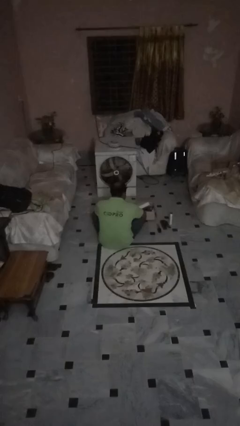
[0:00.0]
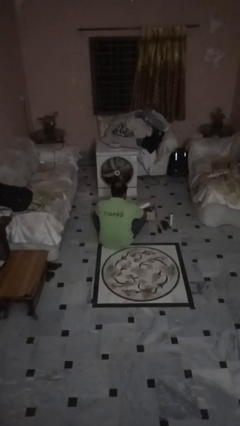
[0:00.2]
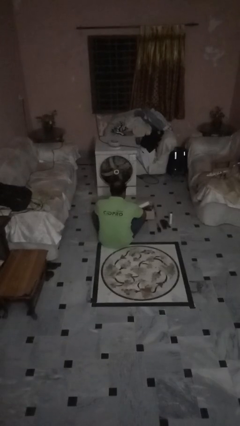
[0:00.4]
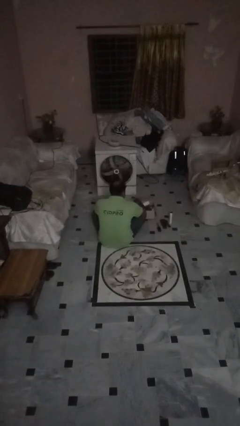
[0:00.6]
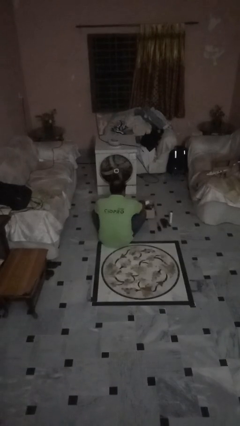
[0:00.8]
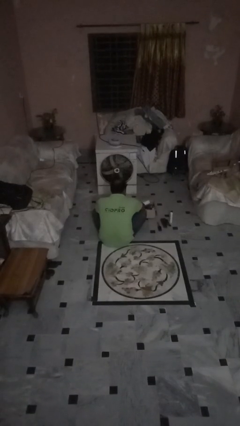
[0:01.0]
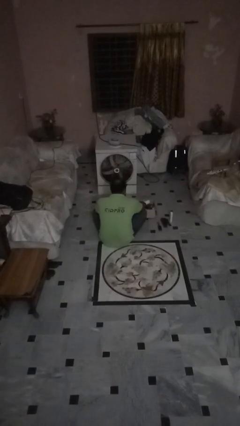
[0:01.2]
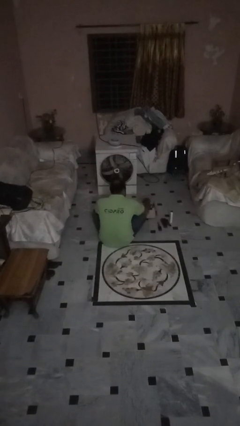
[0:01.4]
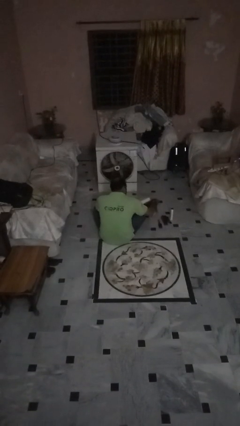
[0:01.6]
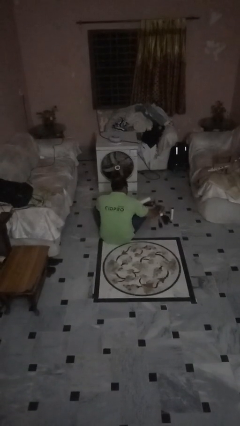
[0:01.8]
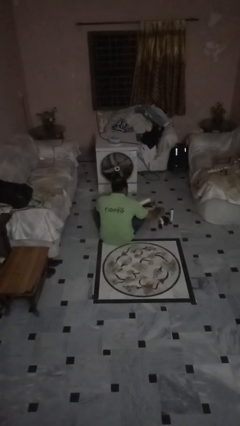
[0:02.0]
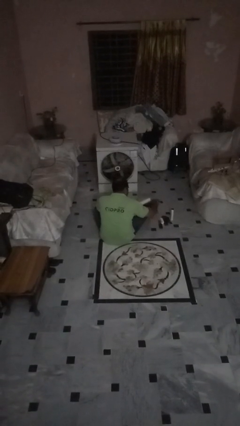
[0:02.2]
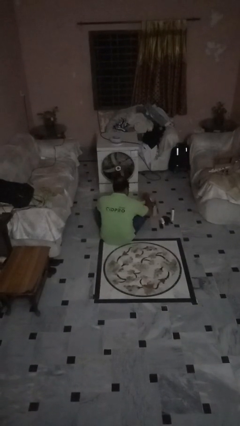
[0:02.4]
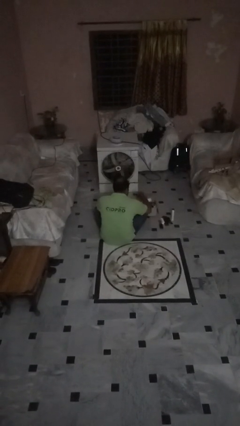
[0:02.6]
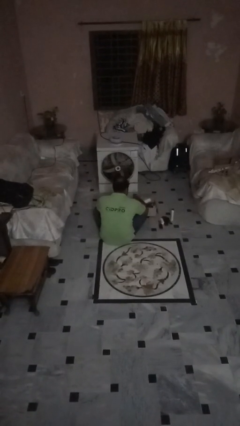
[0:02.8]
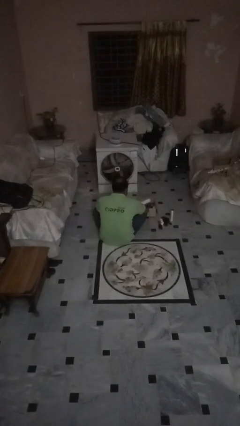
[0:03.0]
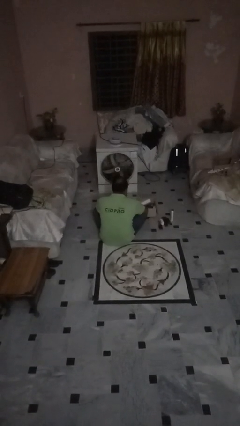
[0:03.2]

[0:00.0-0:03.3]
person unloads box onto floor

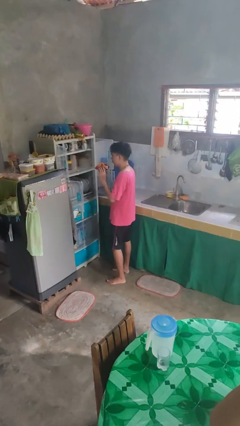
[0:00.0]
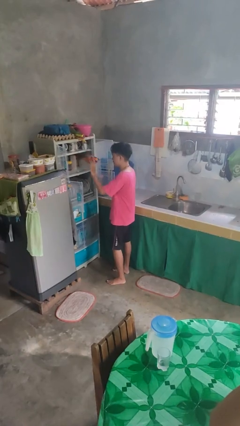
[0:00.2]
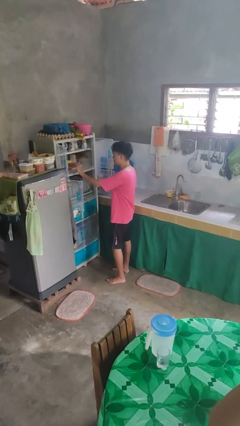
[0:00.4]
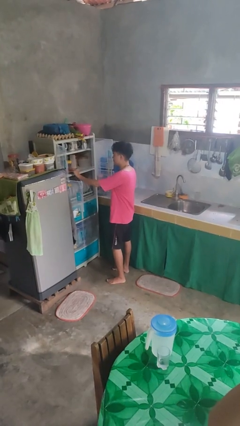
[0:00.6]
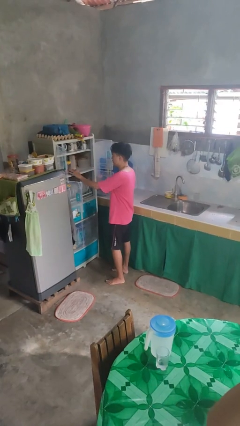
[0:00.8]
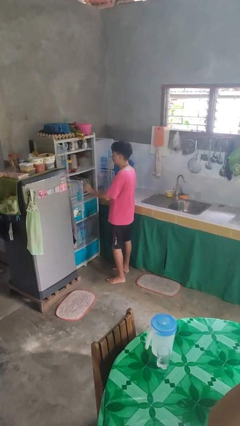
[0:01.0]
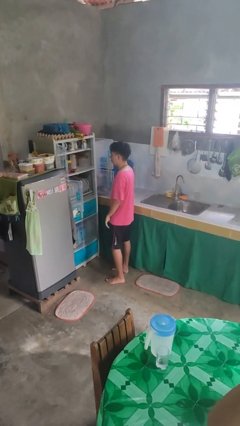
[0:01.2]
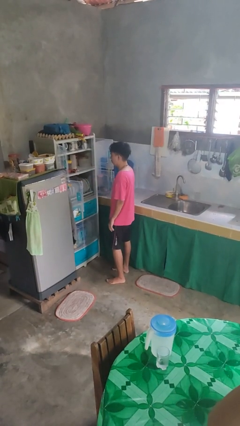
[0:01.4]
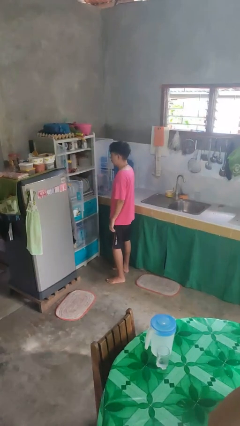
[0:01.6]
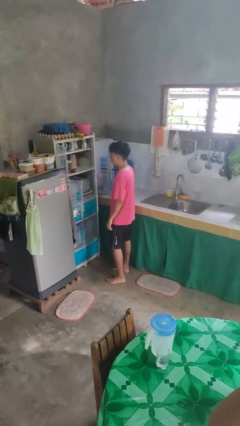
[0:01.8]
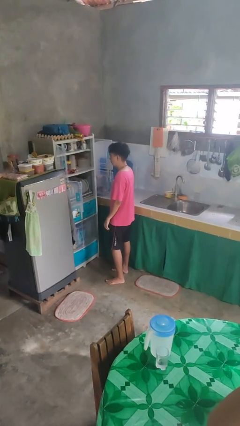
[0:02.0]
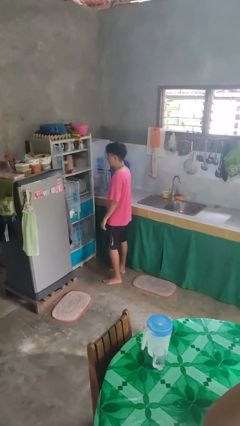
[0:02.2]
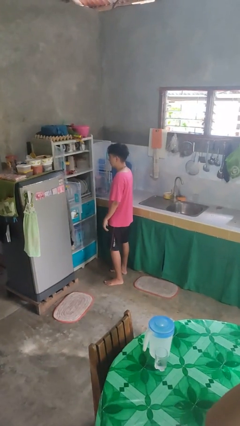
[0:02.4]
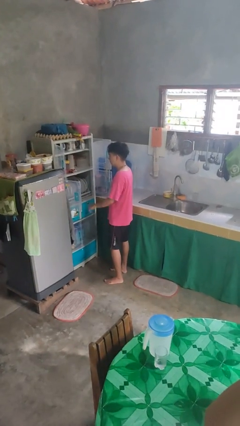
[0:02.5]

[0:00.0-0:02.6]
person puts object in cabinet

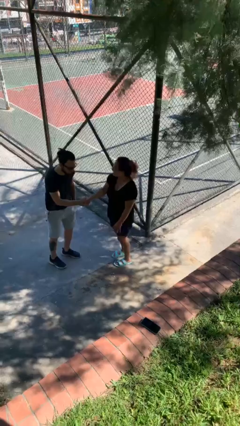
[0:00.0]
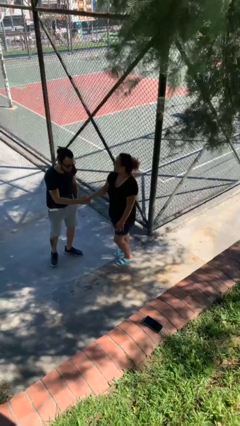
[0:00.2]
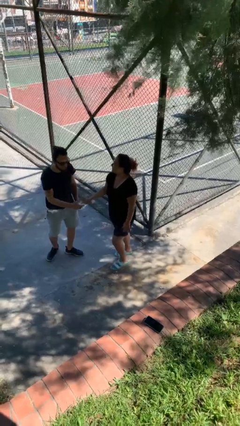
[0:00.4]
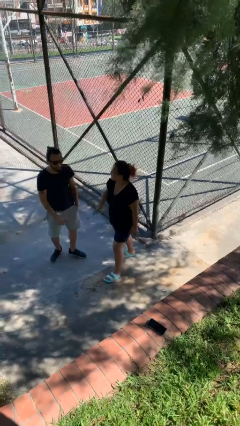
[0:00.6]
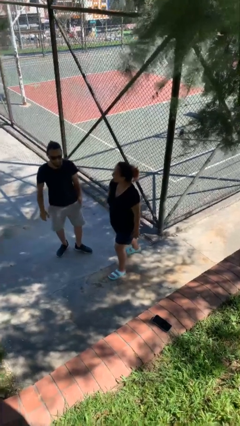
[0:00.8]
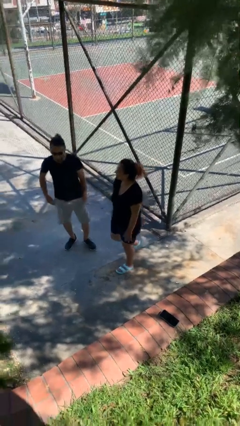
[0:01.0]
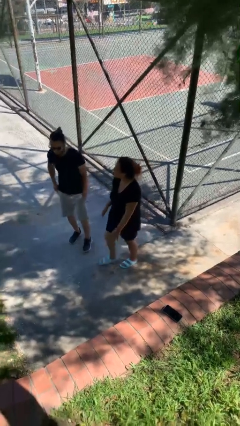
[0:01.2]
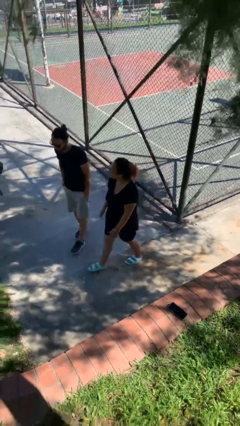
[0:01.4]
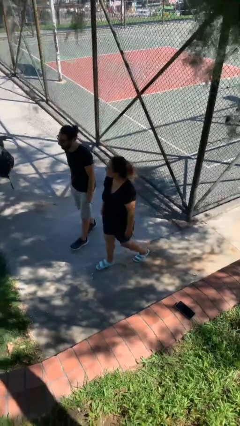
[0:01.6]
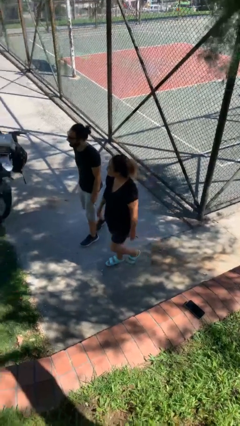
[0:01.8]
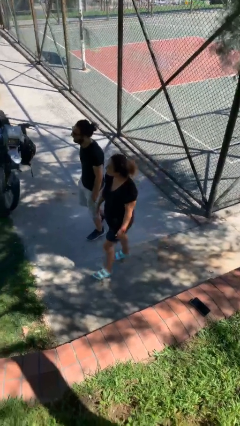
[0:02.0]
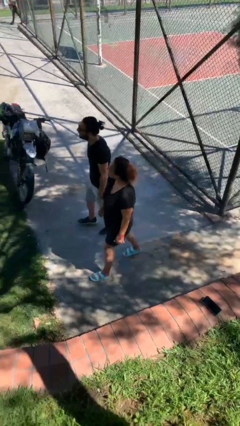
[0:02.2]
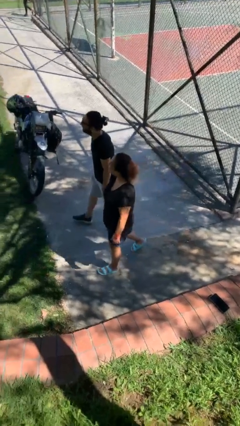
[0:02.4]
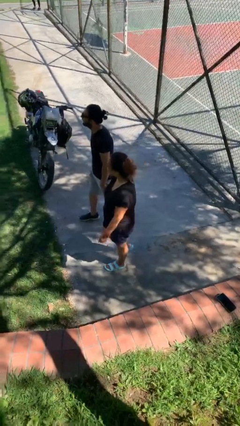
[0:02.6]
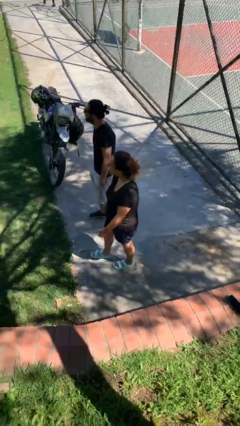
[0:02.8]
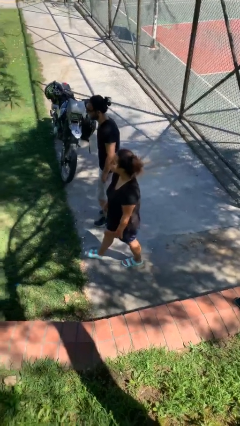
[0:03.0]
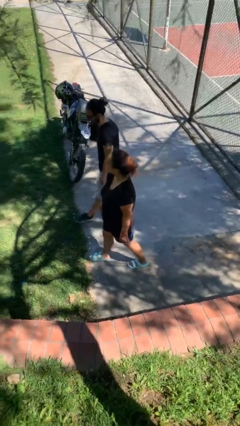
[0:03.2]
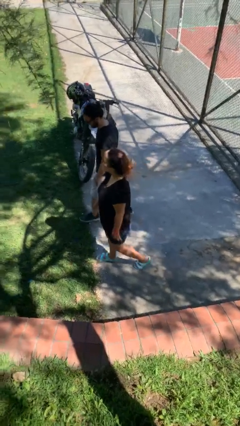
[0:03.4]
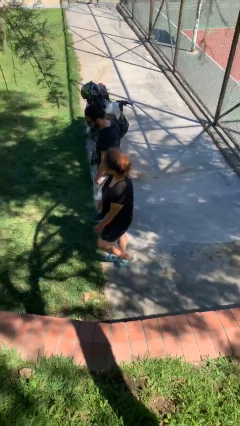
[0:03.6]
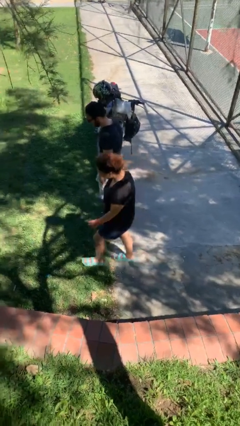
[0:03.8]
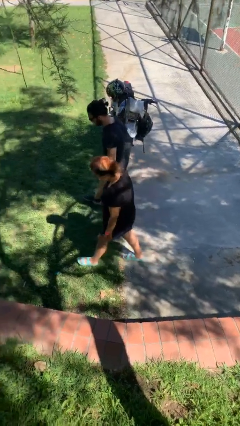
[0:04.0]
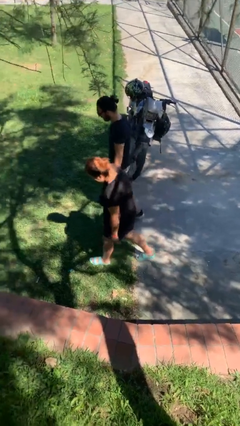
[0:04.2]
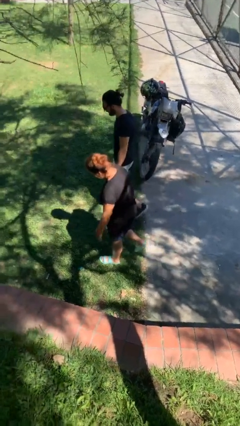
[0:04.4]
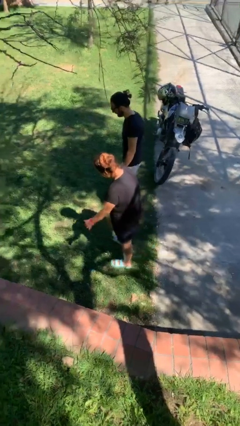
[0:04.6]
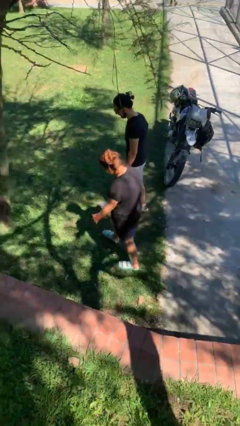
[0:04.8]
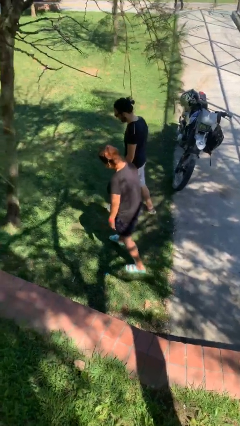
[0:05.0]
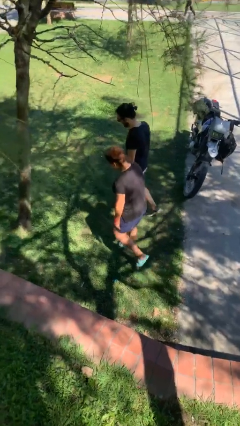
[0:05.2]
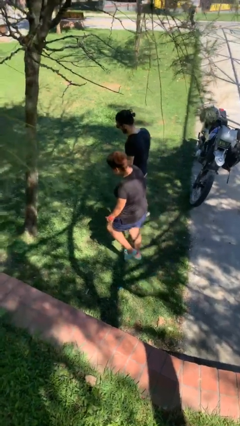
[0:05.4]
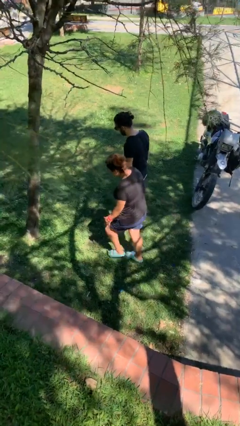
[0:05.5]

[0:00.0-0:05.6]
person talks to person

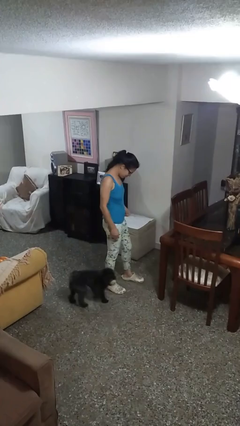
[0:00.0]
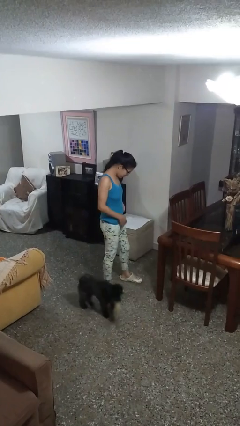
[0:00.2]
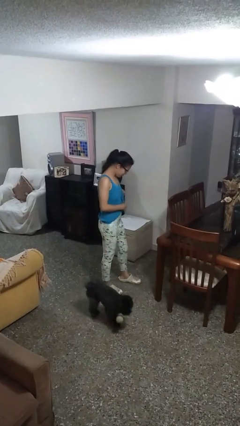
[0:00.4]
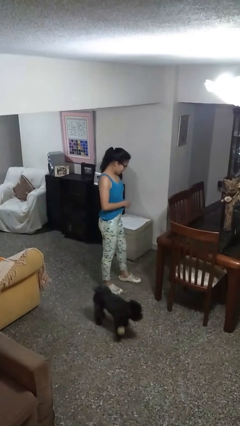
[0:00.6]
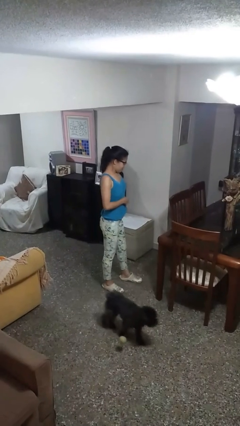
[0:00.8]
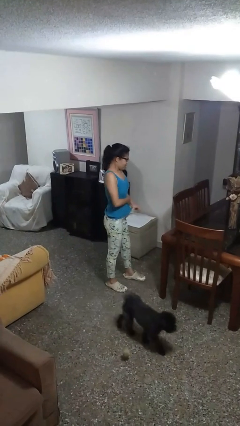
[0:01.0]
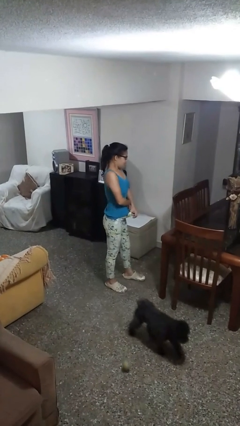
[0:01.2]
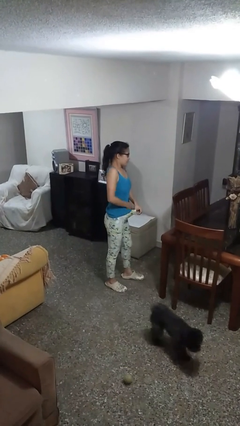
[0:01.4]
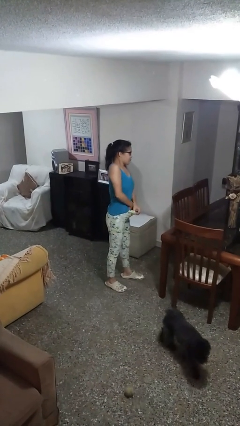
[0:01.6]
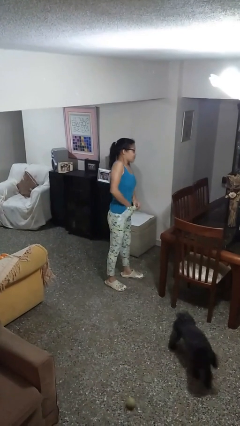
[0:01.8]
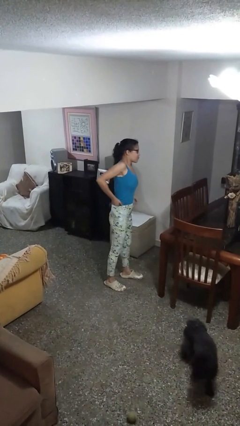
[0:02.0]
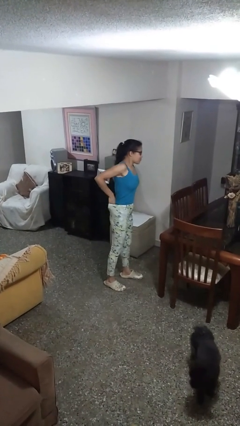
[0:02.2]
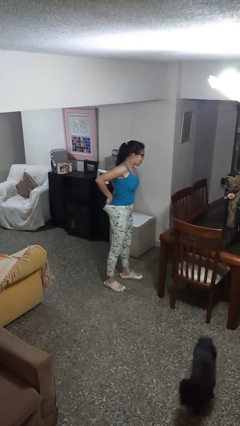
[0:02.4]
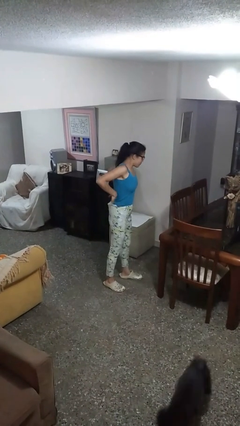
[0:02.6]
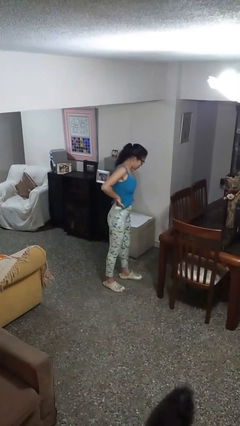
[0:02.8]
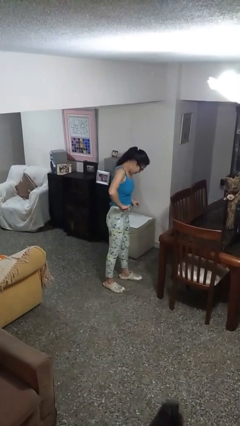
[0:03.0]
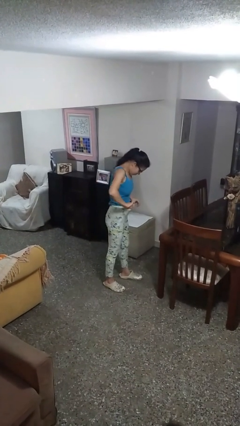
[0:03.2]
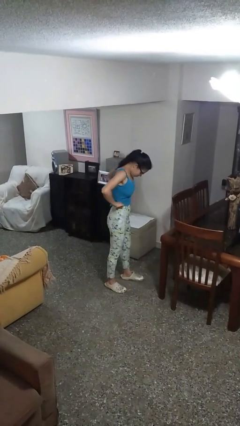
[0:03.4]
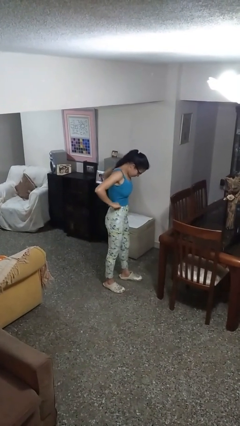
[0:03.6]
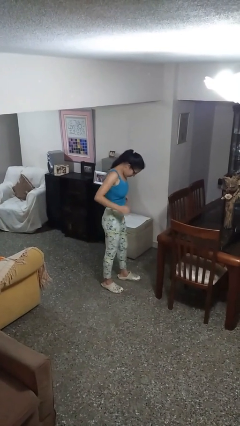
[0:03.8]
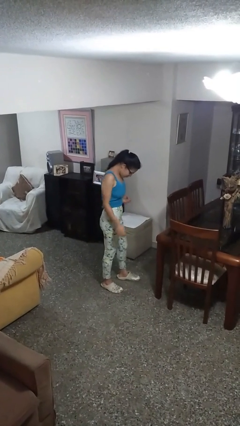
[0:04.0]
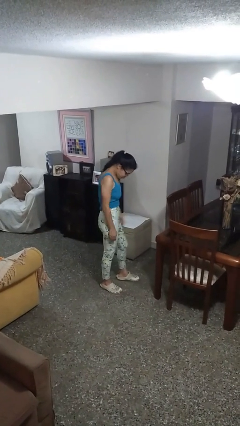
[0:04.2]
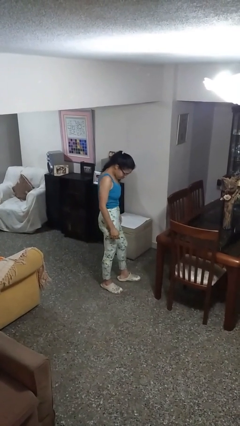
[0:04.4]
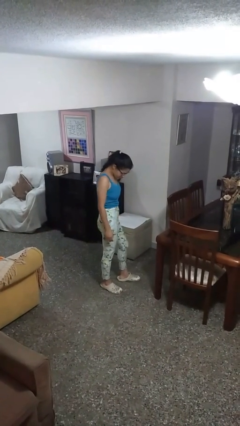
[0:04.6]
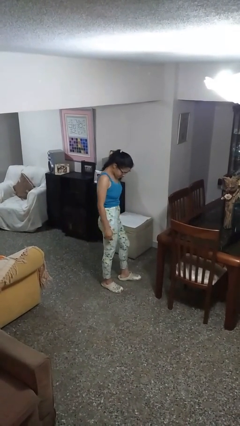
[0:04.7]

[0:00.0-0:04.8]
person tucks in shirt

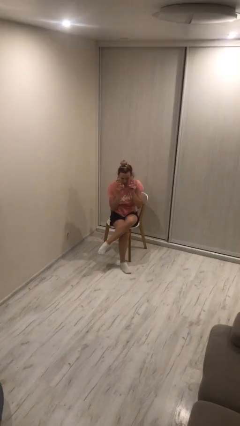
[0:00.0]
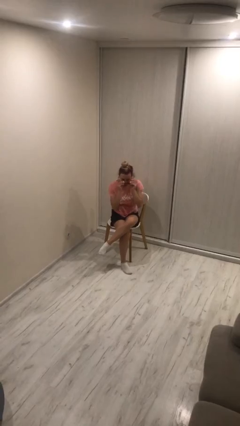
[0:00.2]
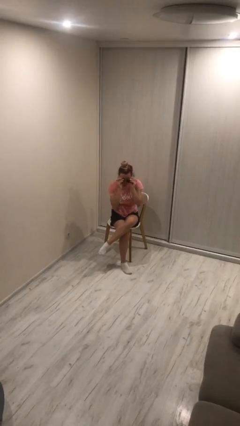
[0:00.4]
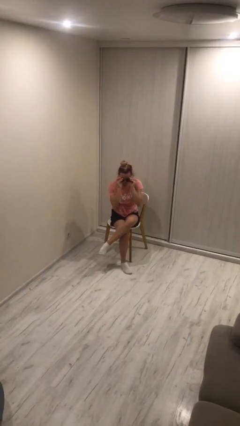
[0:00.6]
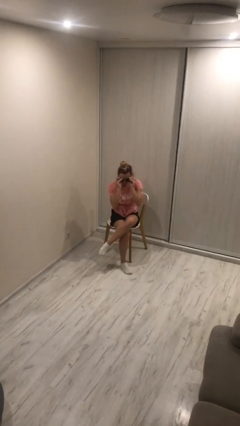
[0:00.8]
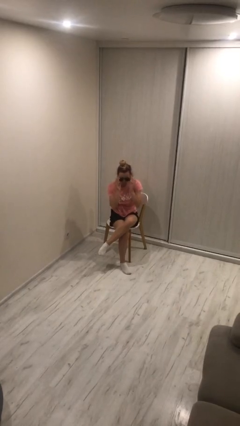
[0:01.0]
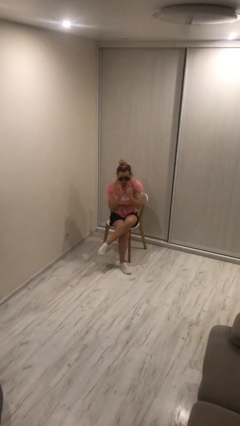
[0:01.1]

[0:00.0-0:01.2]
person puts on sunglasses
